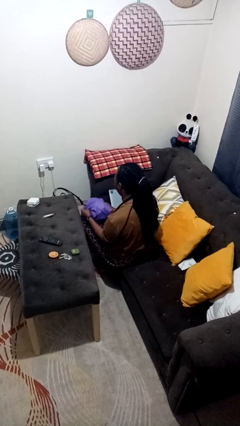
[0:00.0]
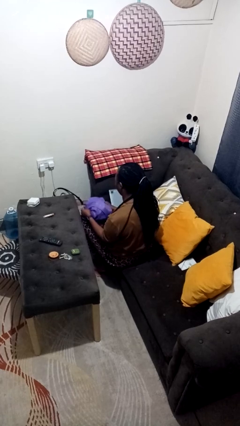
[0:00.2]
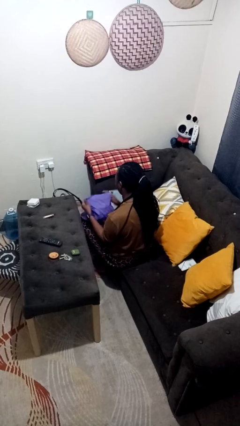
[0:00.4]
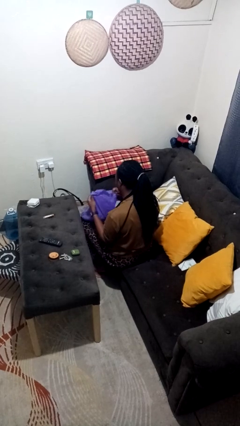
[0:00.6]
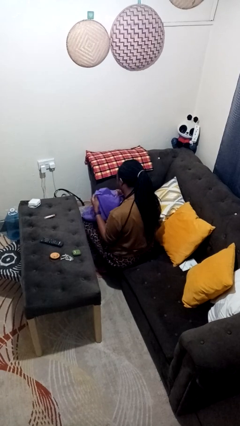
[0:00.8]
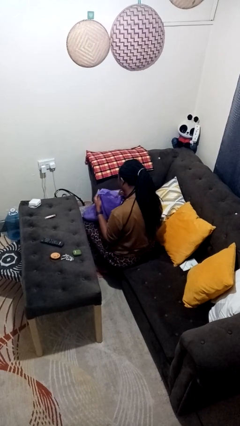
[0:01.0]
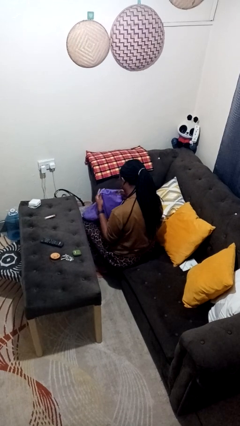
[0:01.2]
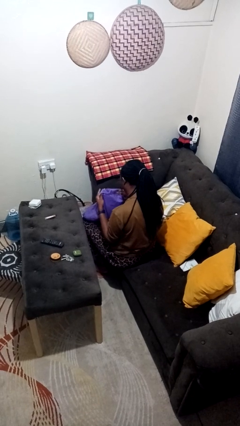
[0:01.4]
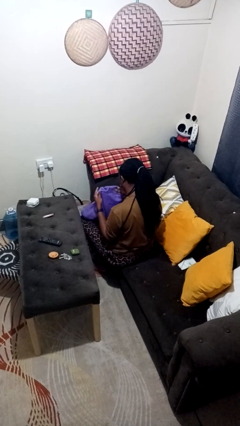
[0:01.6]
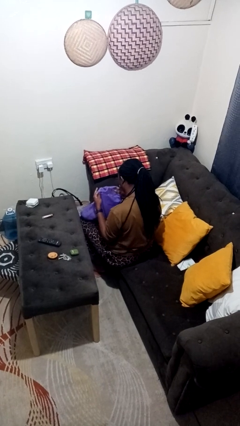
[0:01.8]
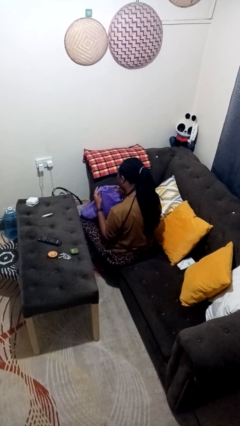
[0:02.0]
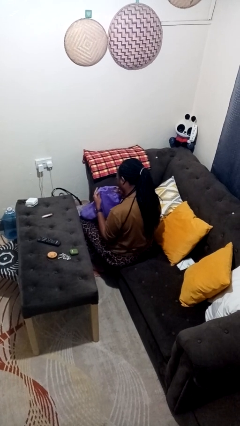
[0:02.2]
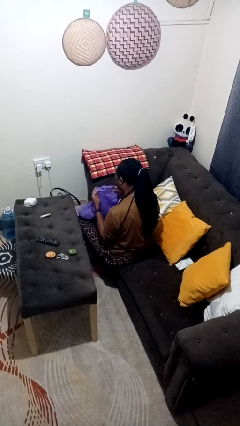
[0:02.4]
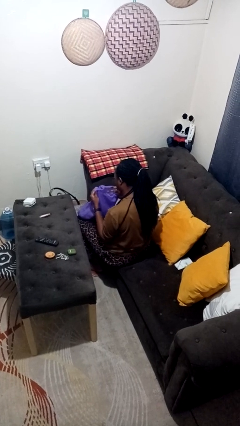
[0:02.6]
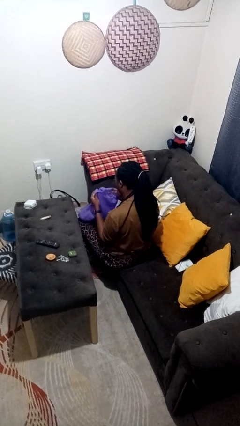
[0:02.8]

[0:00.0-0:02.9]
person searches in bag

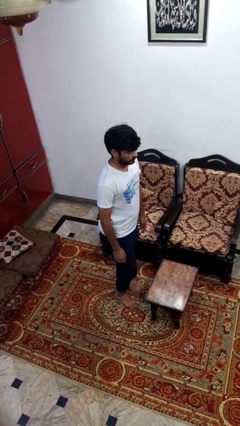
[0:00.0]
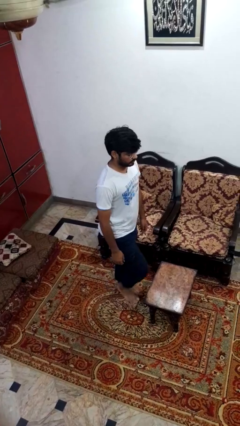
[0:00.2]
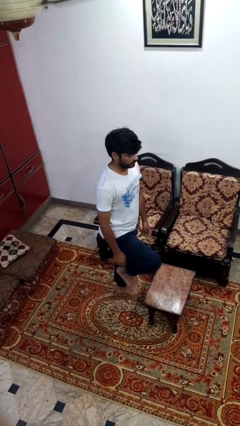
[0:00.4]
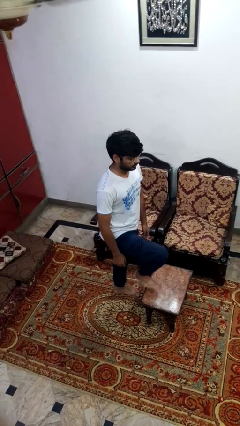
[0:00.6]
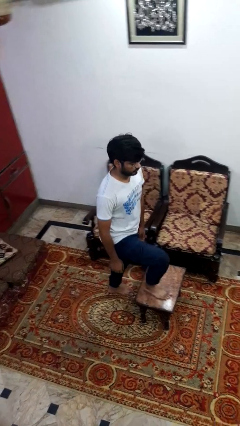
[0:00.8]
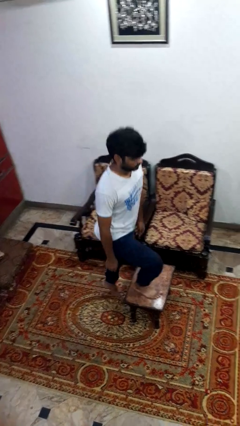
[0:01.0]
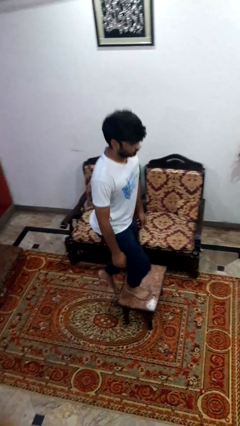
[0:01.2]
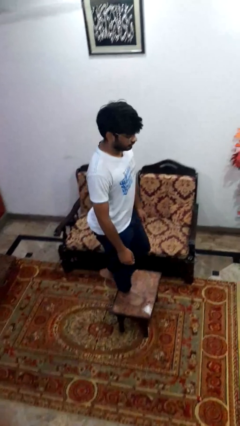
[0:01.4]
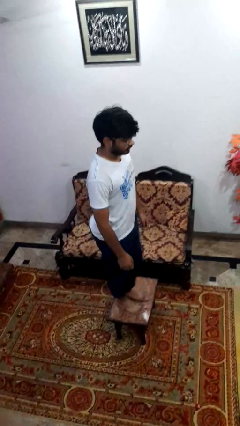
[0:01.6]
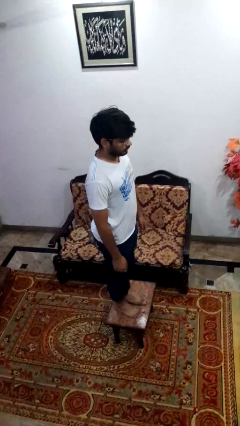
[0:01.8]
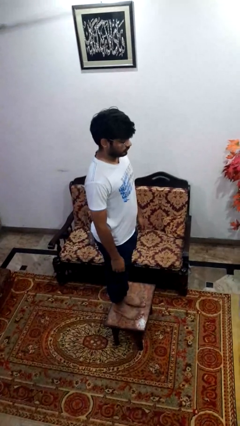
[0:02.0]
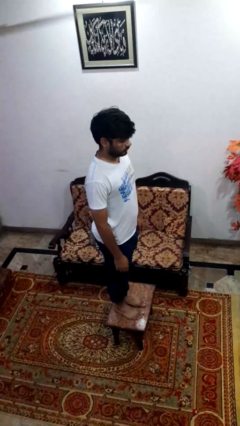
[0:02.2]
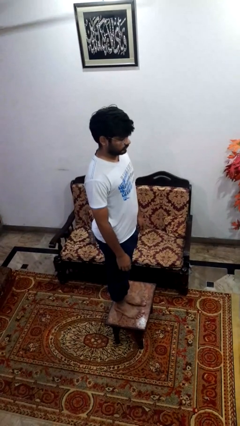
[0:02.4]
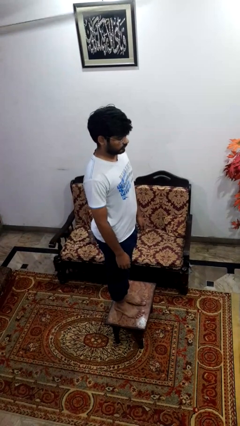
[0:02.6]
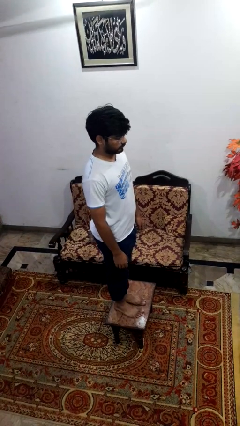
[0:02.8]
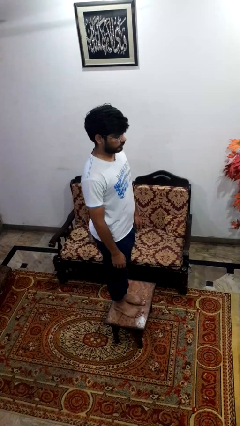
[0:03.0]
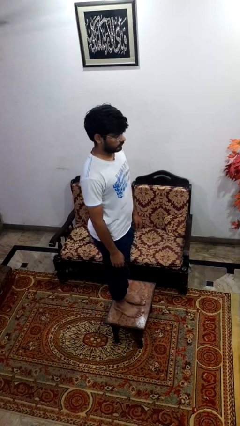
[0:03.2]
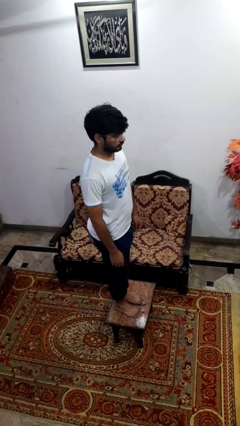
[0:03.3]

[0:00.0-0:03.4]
person climbs on table

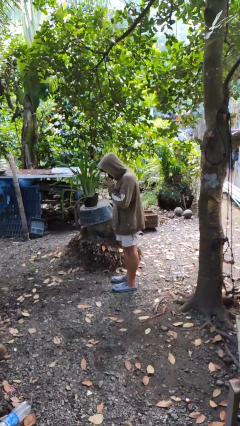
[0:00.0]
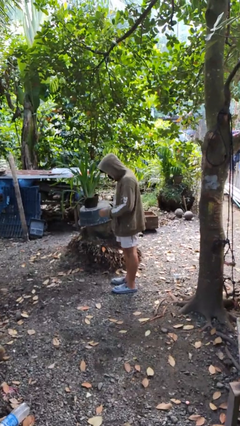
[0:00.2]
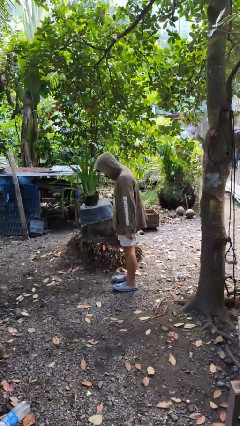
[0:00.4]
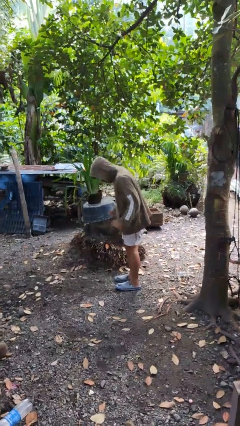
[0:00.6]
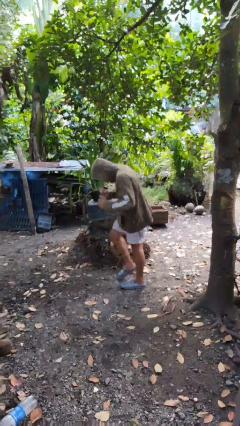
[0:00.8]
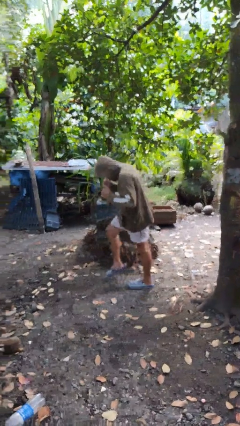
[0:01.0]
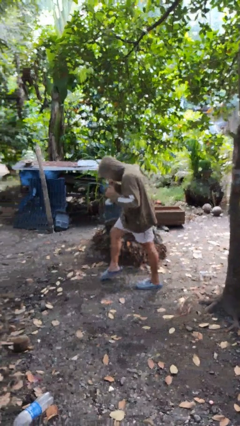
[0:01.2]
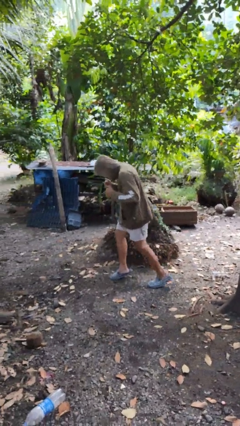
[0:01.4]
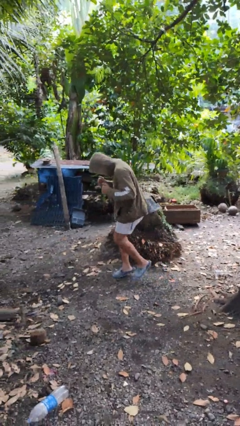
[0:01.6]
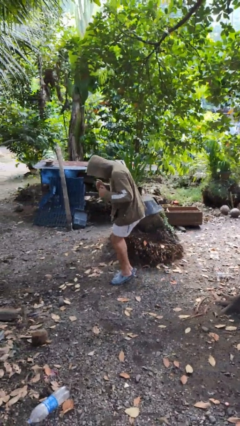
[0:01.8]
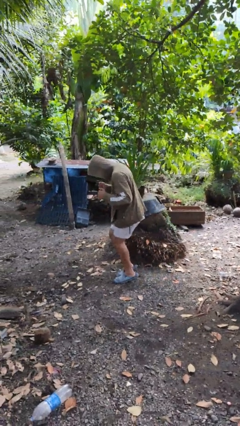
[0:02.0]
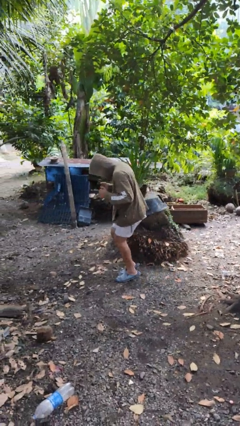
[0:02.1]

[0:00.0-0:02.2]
person walks tiptoe

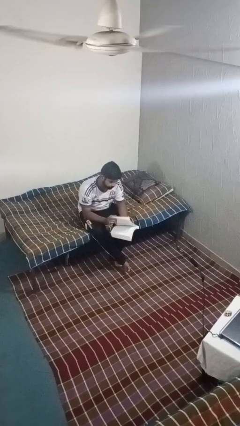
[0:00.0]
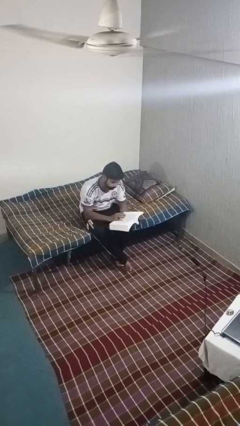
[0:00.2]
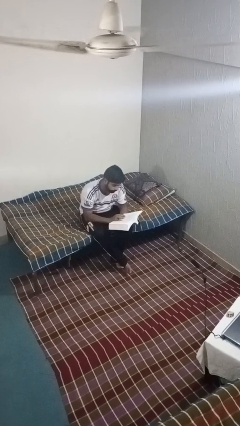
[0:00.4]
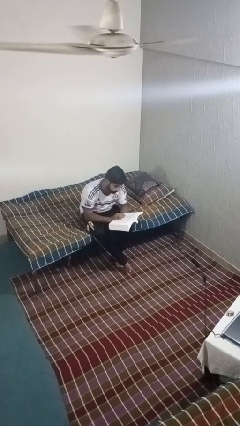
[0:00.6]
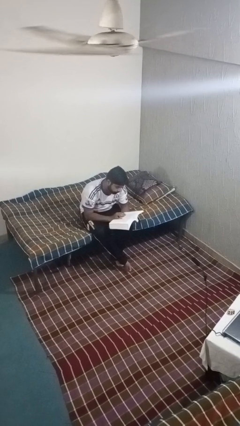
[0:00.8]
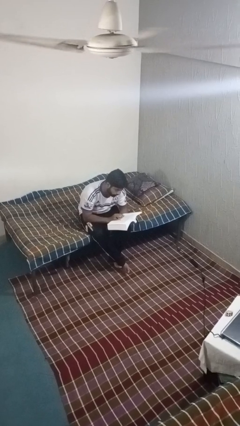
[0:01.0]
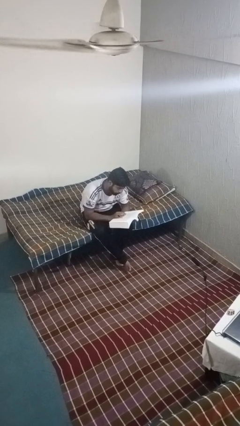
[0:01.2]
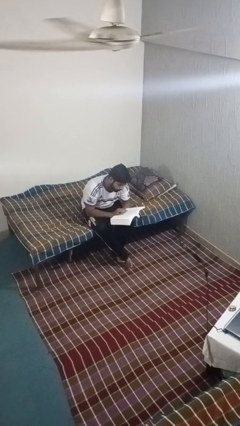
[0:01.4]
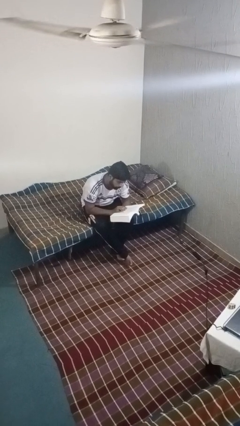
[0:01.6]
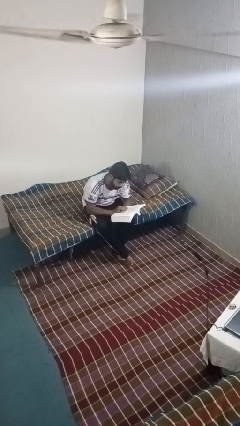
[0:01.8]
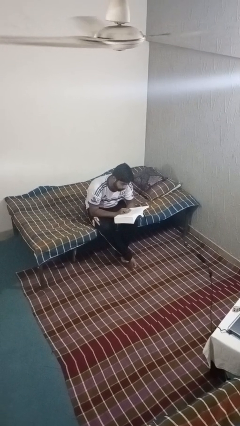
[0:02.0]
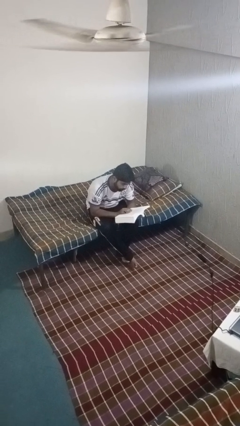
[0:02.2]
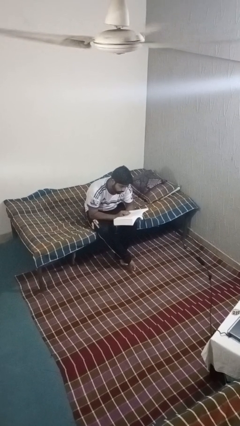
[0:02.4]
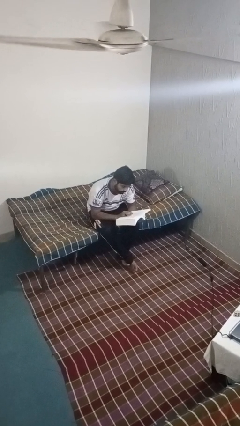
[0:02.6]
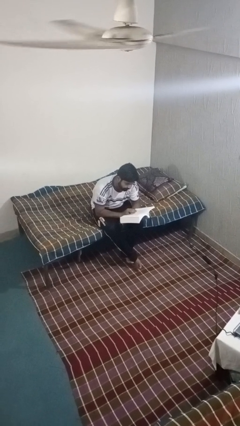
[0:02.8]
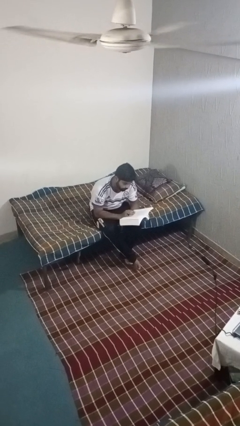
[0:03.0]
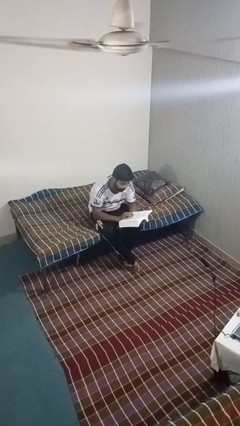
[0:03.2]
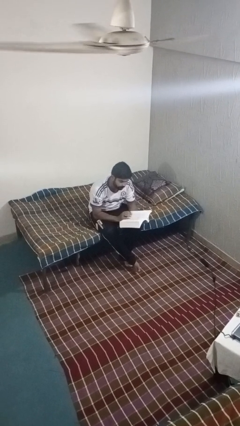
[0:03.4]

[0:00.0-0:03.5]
person reads book

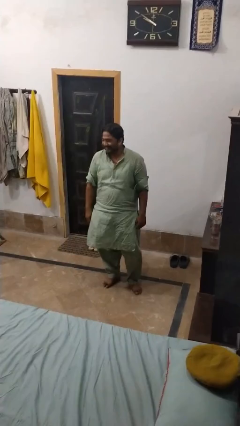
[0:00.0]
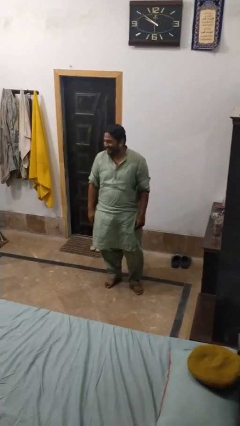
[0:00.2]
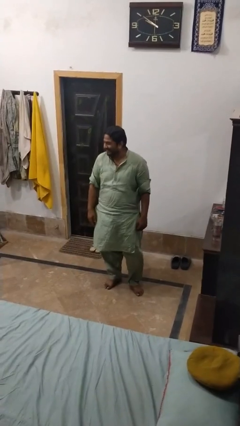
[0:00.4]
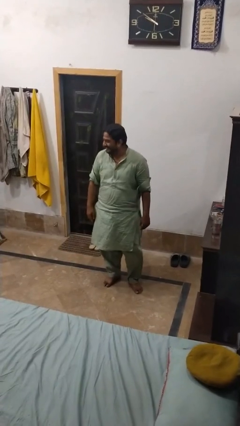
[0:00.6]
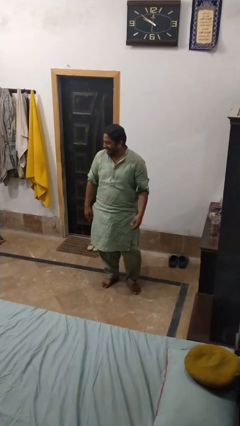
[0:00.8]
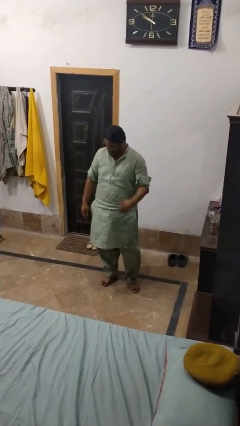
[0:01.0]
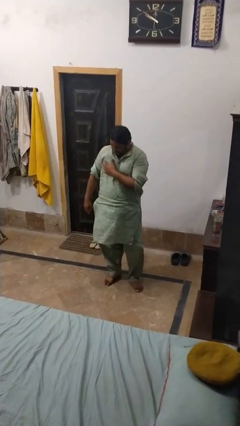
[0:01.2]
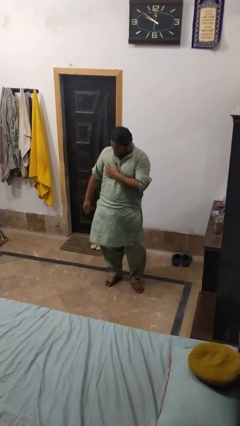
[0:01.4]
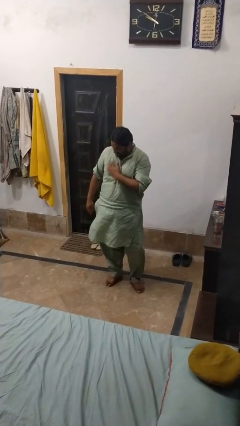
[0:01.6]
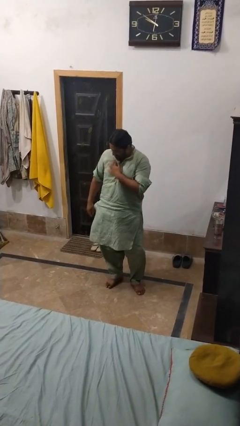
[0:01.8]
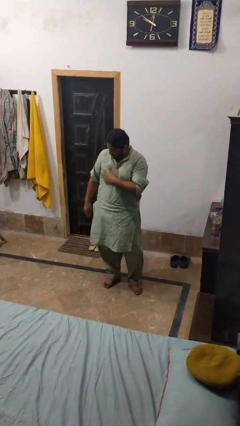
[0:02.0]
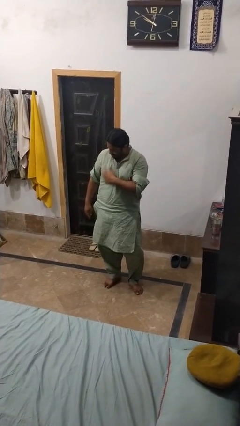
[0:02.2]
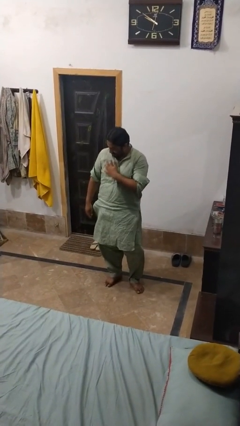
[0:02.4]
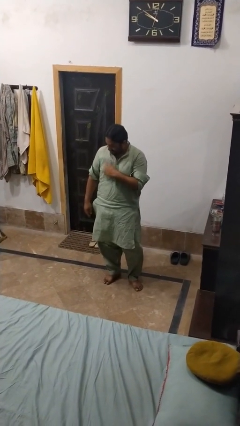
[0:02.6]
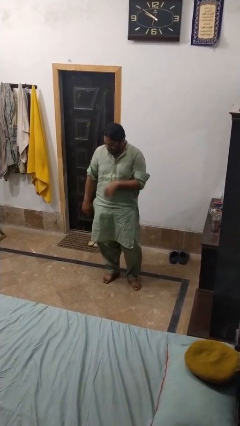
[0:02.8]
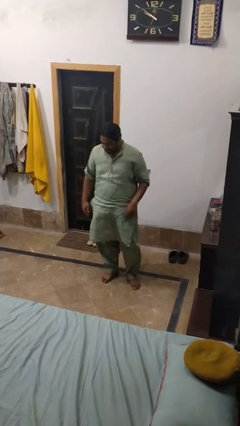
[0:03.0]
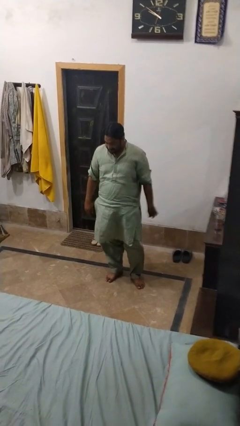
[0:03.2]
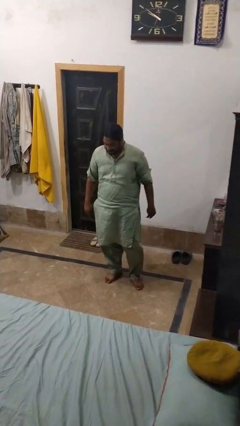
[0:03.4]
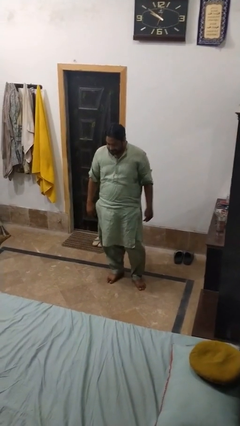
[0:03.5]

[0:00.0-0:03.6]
person swats bug

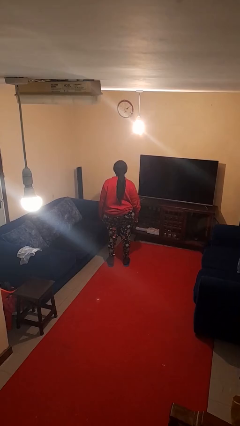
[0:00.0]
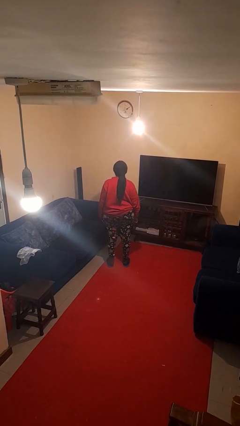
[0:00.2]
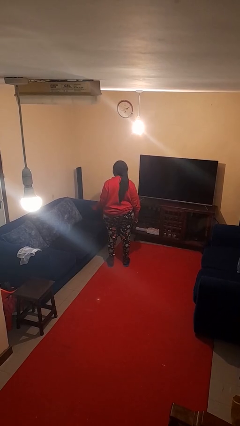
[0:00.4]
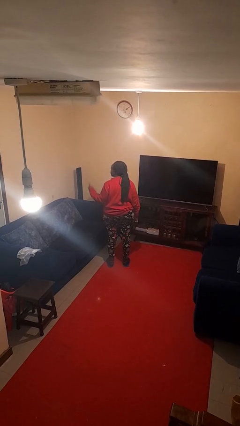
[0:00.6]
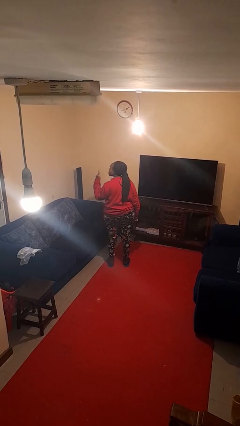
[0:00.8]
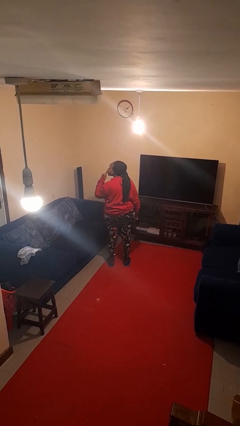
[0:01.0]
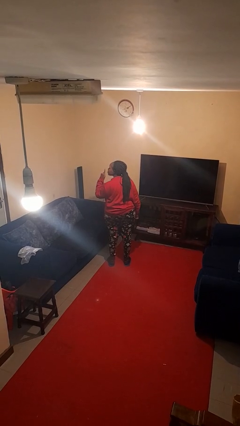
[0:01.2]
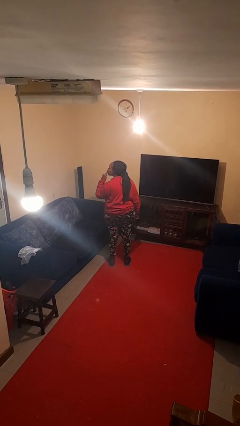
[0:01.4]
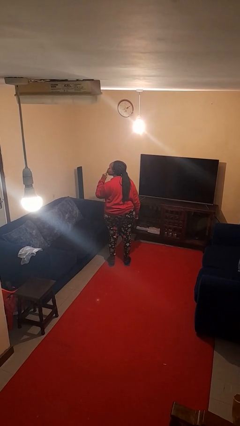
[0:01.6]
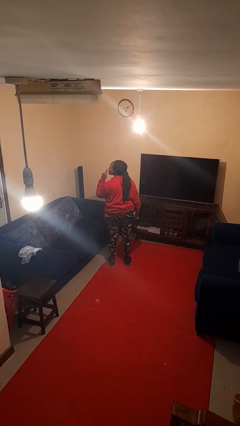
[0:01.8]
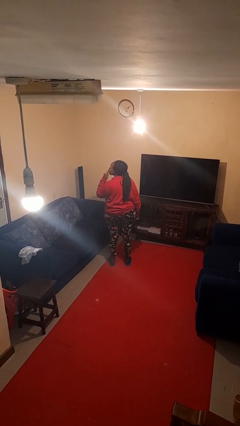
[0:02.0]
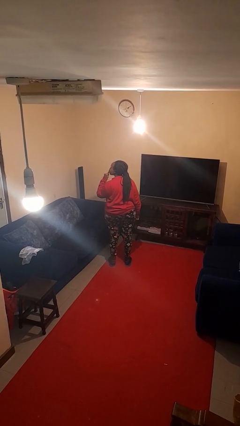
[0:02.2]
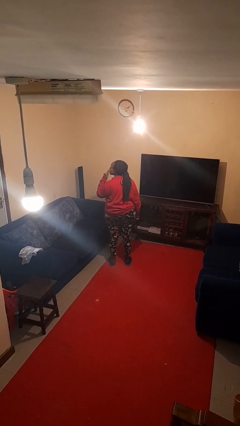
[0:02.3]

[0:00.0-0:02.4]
person gestures be quiet
